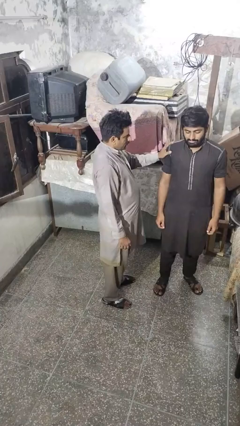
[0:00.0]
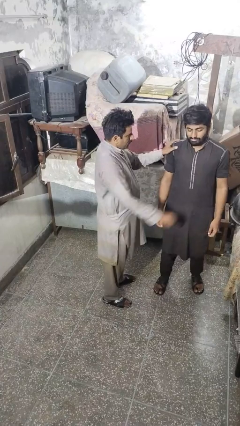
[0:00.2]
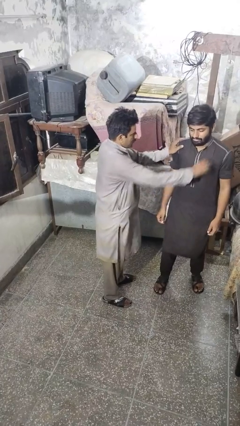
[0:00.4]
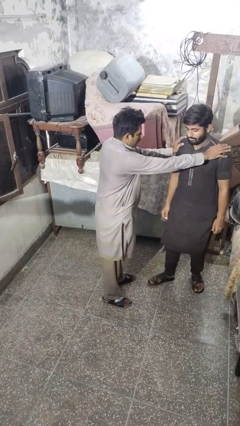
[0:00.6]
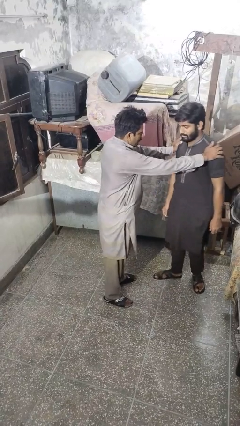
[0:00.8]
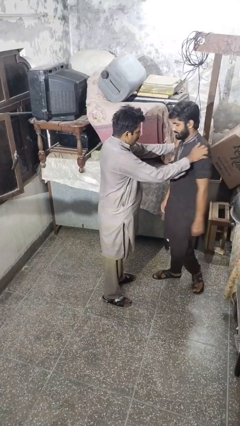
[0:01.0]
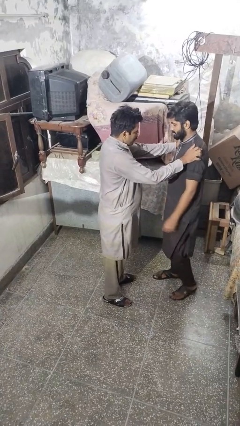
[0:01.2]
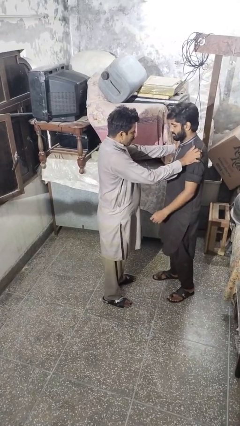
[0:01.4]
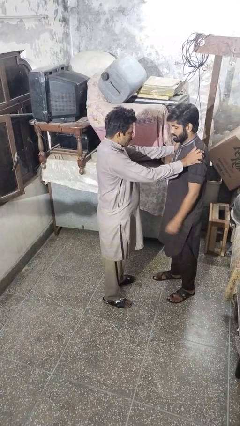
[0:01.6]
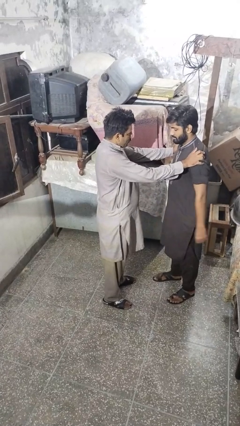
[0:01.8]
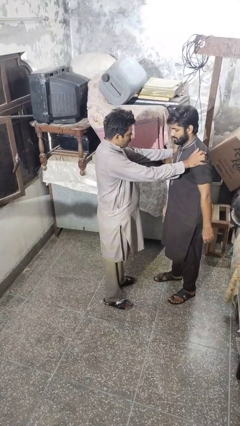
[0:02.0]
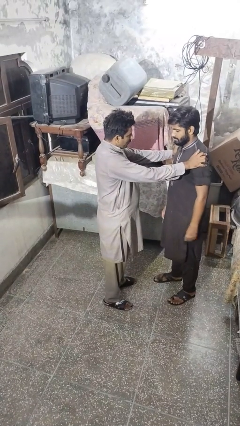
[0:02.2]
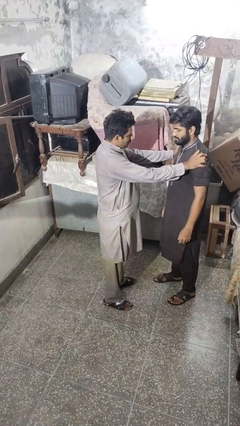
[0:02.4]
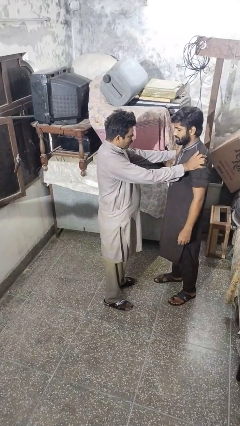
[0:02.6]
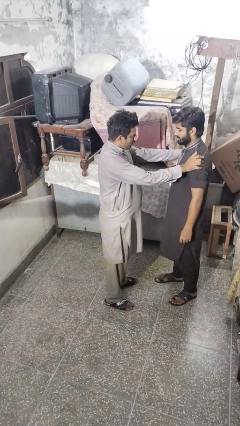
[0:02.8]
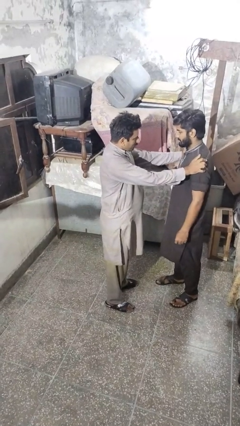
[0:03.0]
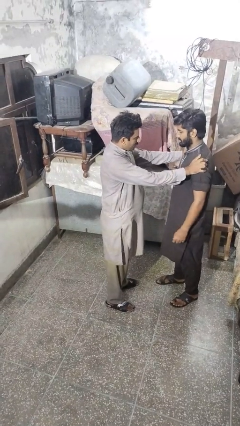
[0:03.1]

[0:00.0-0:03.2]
person spins person around

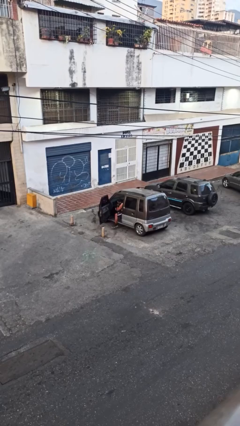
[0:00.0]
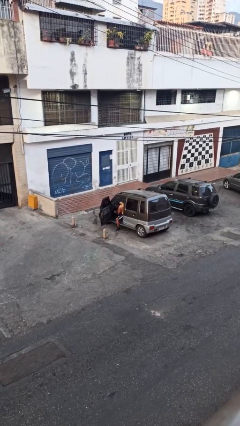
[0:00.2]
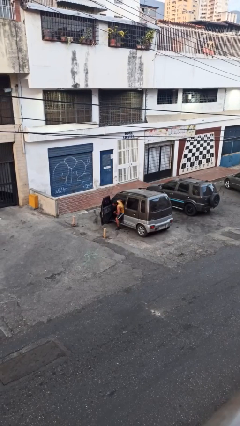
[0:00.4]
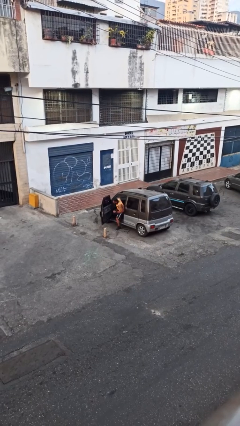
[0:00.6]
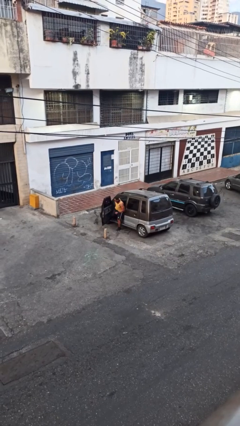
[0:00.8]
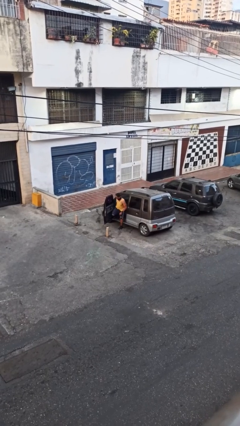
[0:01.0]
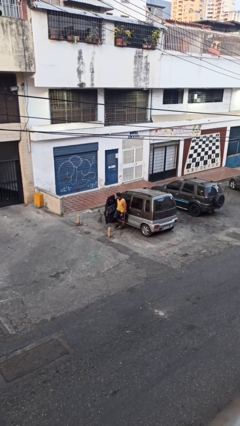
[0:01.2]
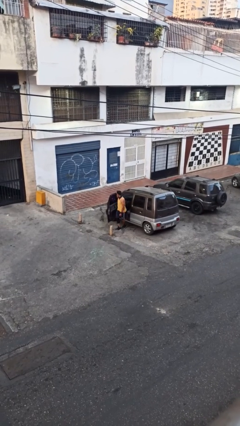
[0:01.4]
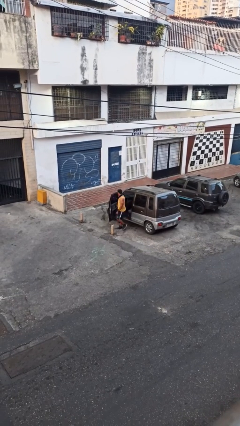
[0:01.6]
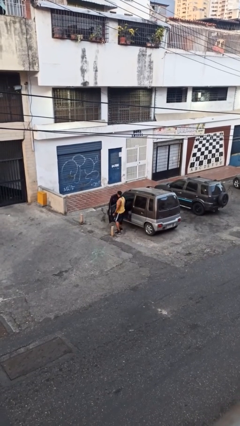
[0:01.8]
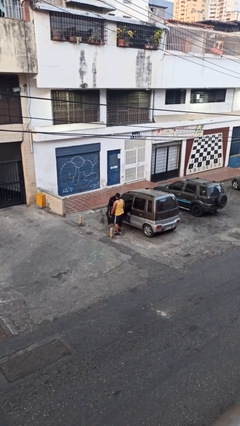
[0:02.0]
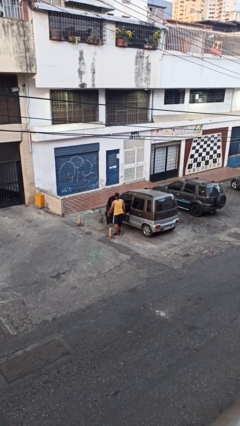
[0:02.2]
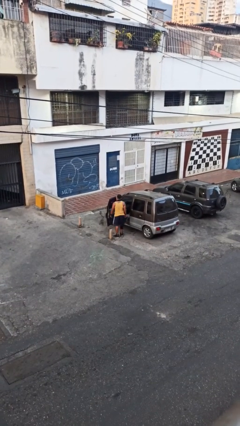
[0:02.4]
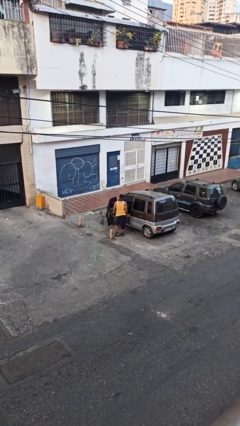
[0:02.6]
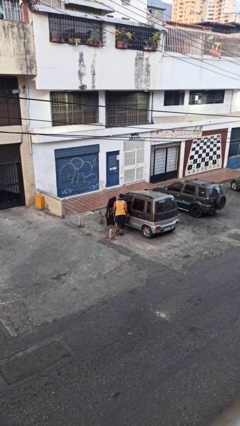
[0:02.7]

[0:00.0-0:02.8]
person exits car

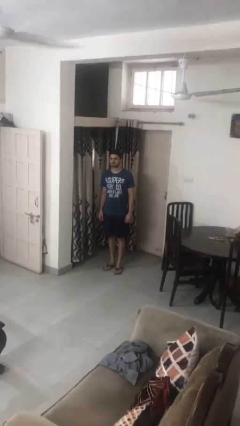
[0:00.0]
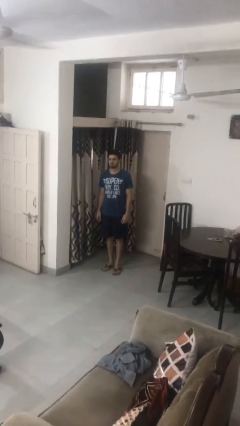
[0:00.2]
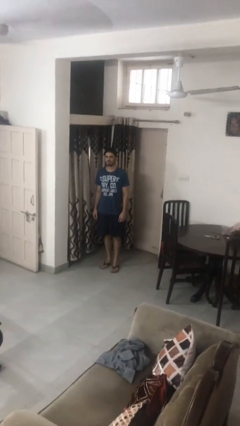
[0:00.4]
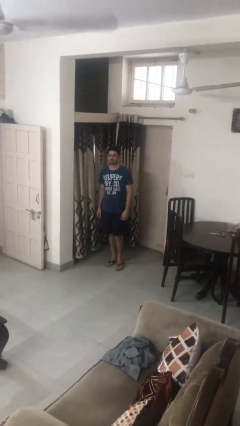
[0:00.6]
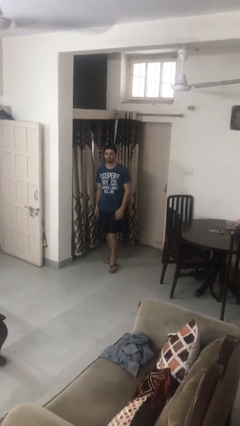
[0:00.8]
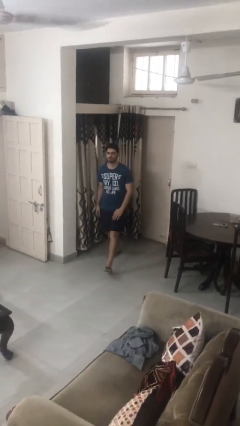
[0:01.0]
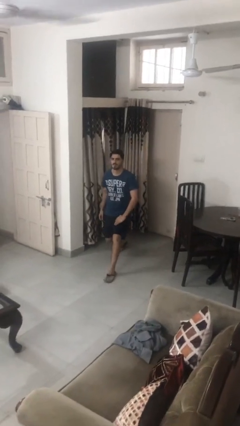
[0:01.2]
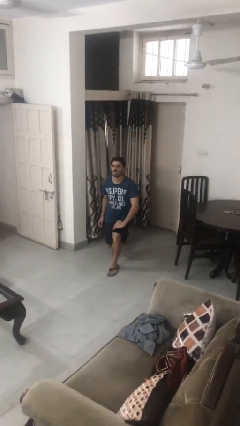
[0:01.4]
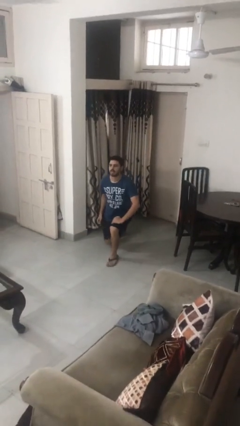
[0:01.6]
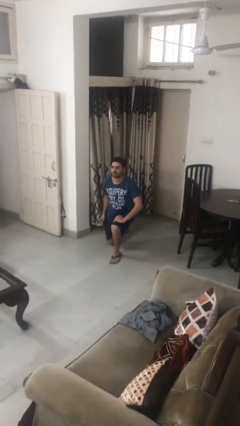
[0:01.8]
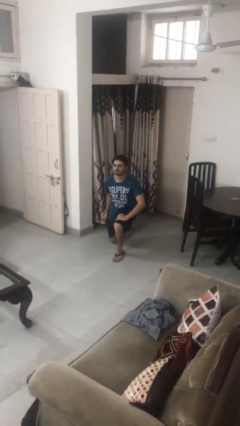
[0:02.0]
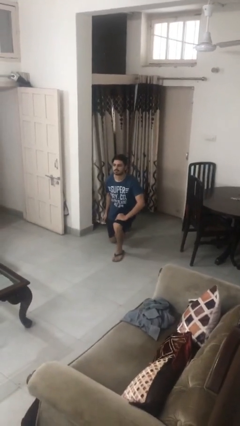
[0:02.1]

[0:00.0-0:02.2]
person kneels

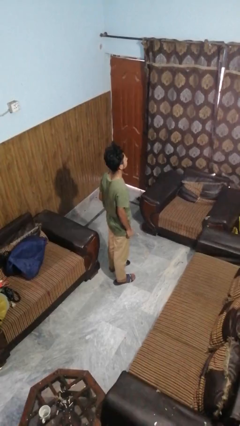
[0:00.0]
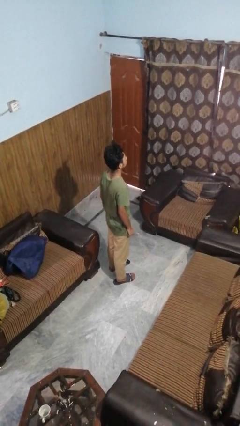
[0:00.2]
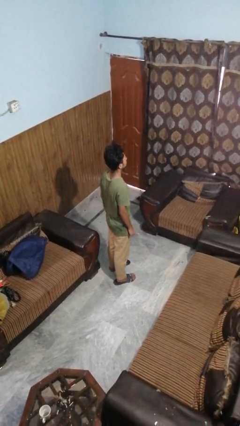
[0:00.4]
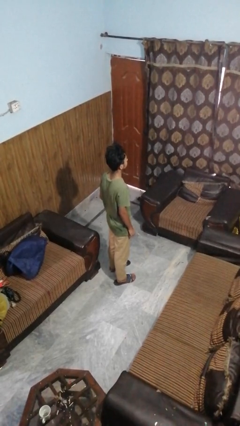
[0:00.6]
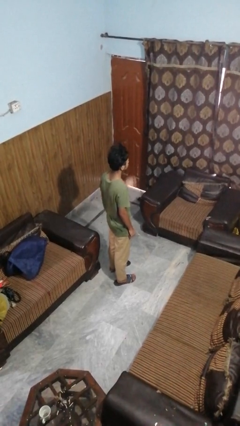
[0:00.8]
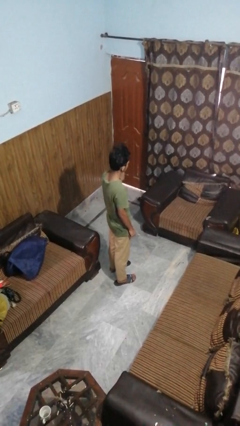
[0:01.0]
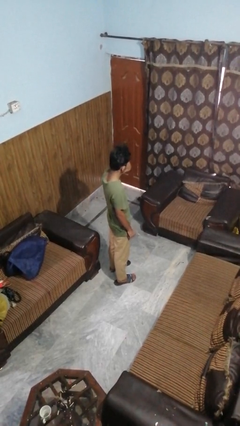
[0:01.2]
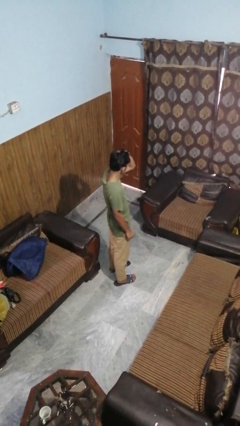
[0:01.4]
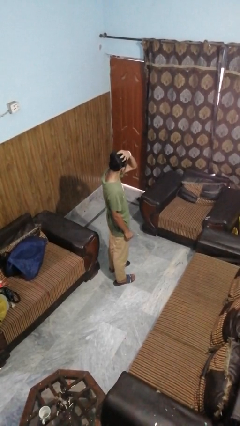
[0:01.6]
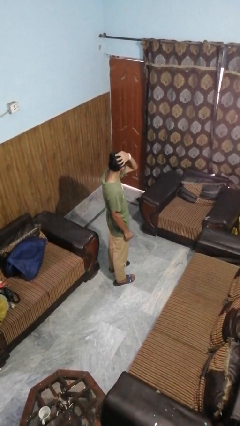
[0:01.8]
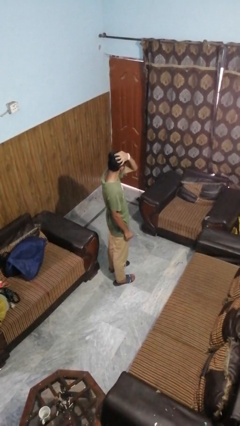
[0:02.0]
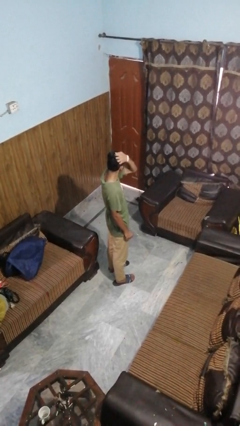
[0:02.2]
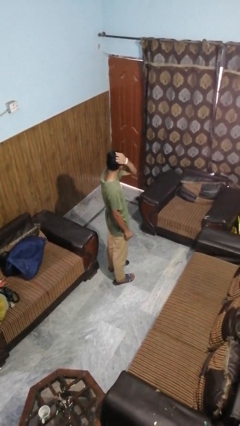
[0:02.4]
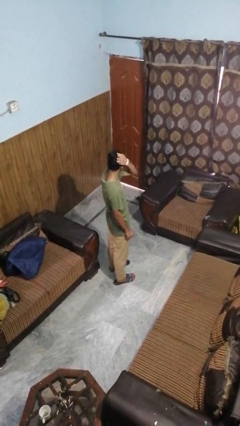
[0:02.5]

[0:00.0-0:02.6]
person strokes hair

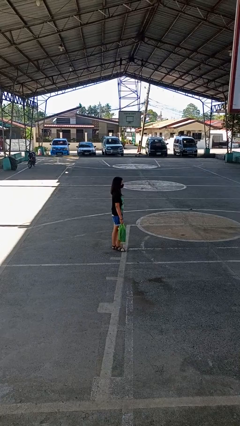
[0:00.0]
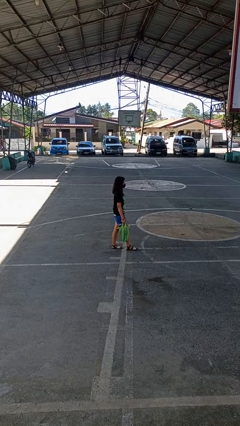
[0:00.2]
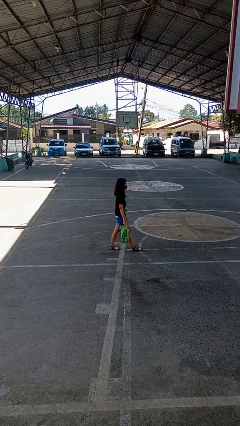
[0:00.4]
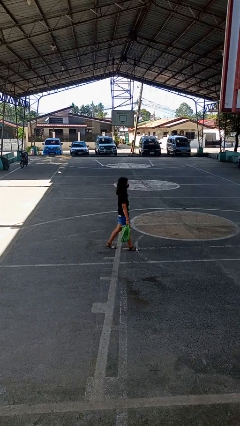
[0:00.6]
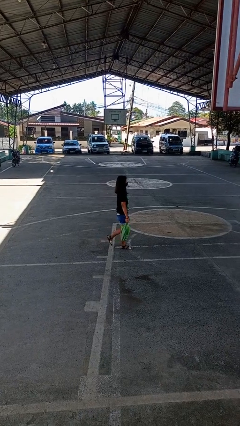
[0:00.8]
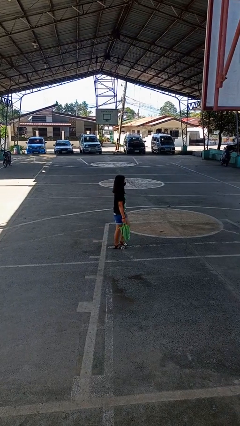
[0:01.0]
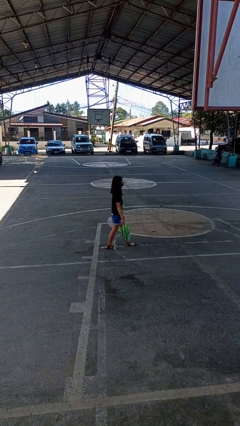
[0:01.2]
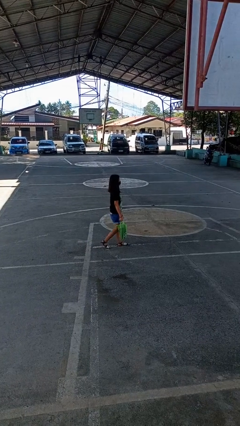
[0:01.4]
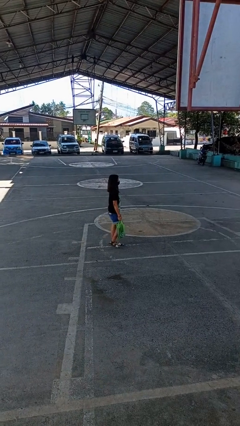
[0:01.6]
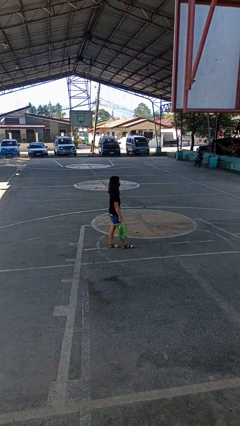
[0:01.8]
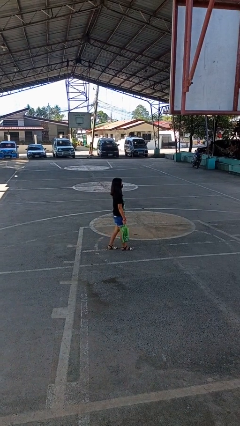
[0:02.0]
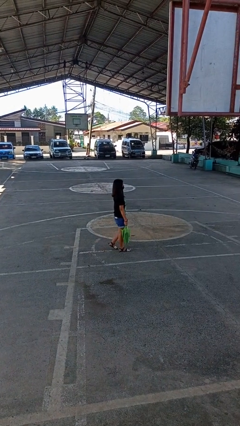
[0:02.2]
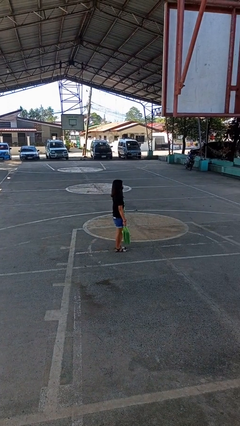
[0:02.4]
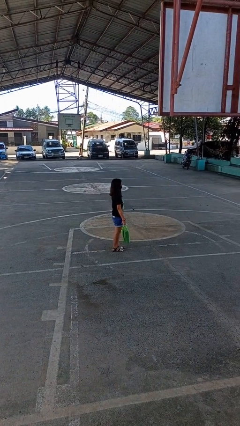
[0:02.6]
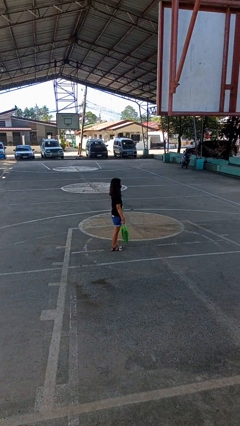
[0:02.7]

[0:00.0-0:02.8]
person carries groceries

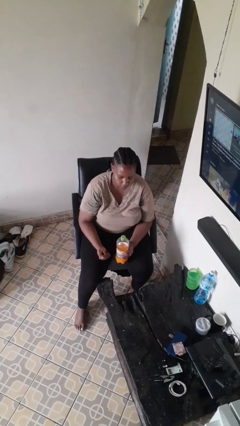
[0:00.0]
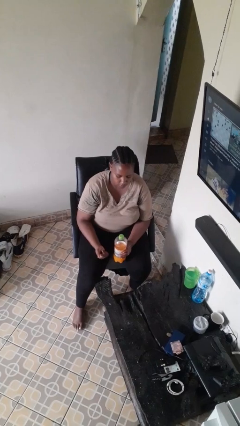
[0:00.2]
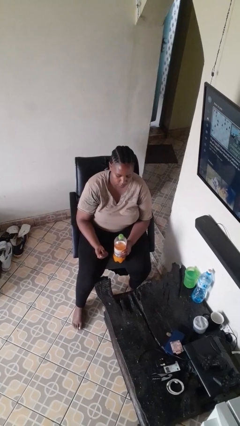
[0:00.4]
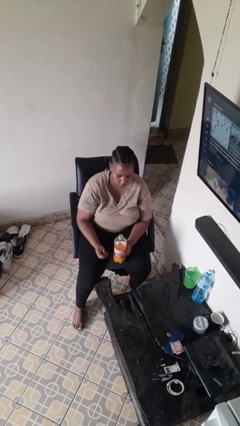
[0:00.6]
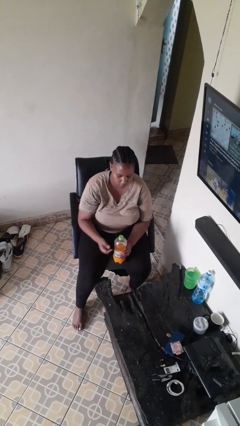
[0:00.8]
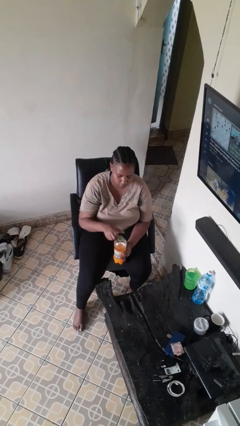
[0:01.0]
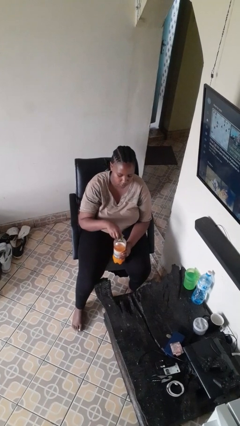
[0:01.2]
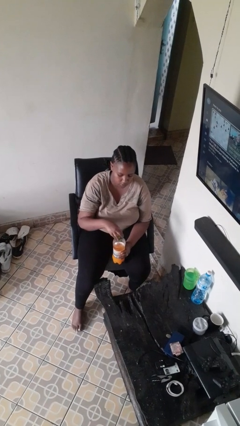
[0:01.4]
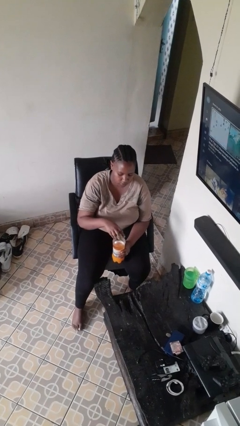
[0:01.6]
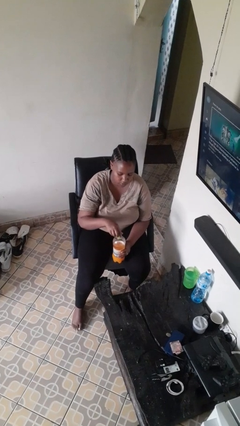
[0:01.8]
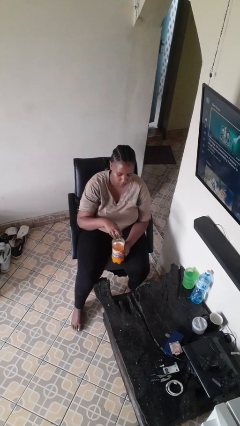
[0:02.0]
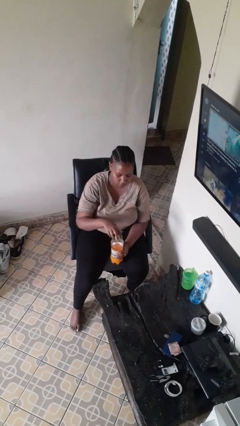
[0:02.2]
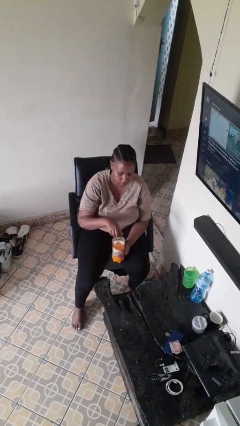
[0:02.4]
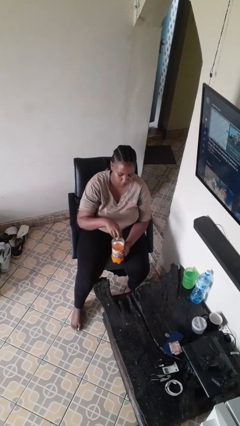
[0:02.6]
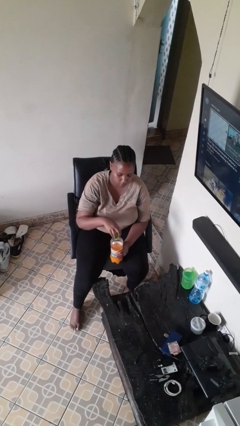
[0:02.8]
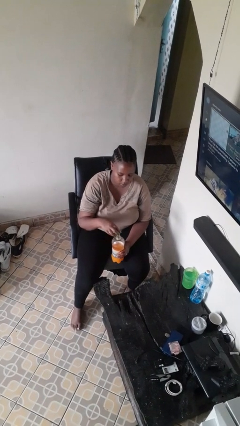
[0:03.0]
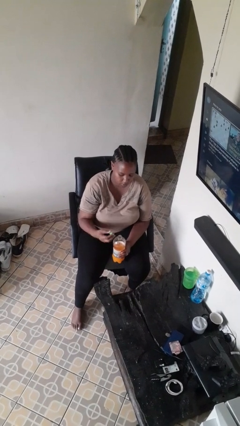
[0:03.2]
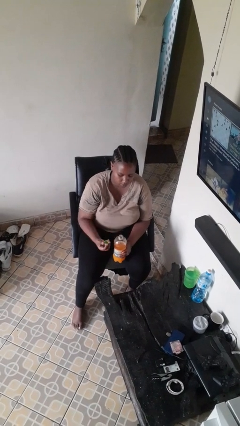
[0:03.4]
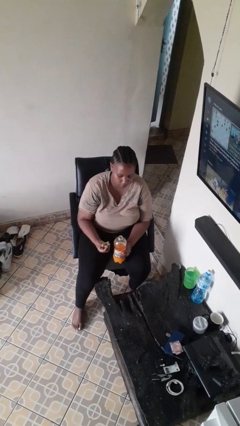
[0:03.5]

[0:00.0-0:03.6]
person unscrews lid from bottle
